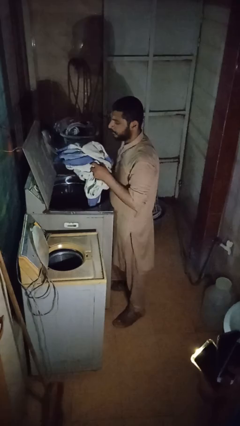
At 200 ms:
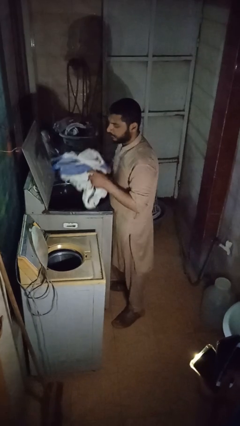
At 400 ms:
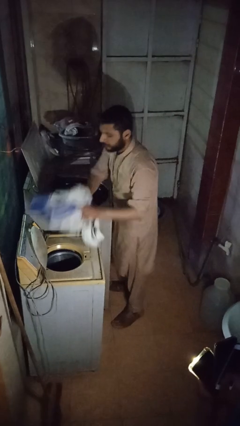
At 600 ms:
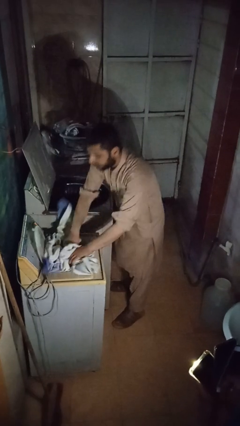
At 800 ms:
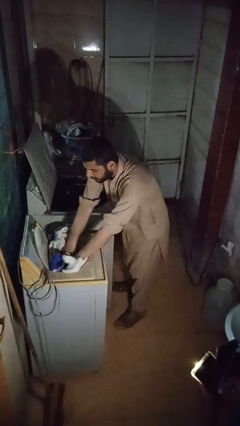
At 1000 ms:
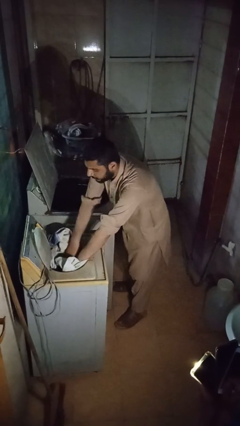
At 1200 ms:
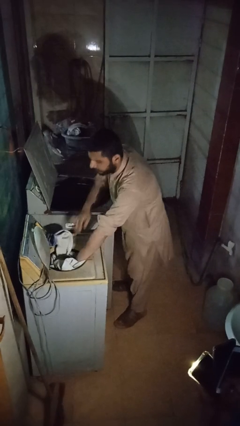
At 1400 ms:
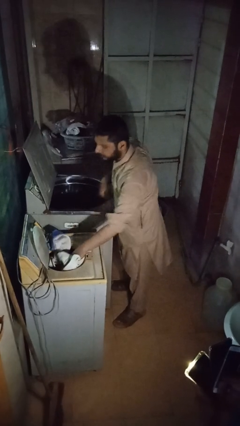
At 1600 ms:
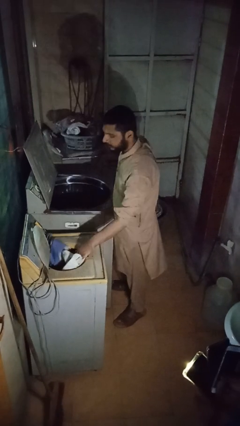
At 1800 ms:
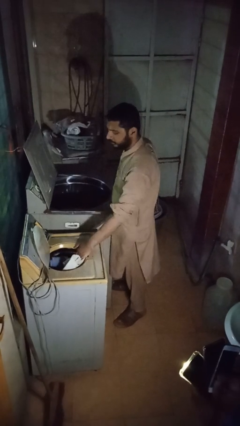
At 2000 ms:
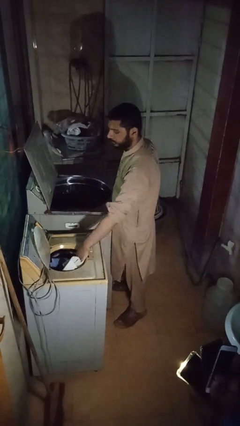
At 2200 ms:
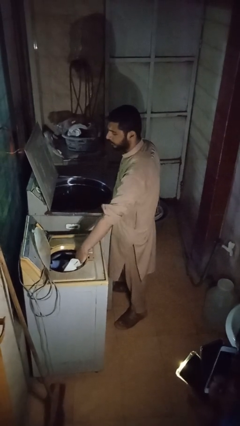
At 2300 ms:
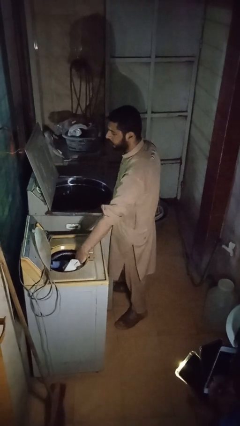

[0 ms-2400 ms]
person loads dryer

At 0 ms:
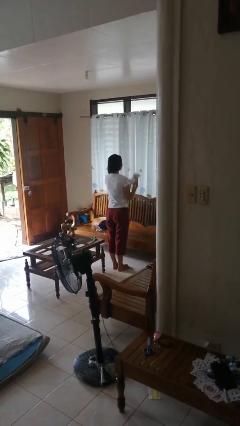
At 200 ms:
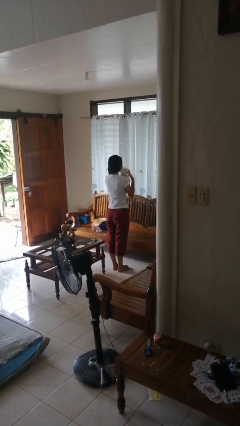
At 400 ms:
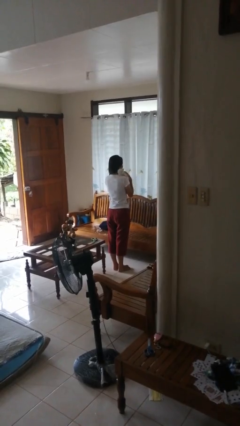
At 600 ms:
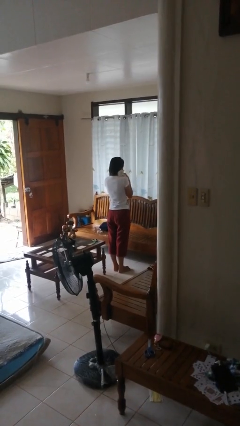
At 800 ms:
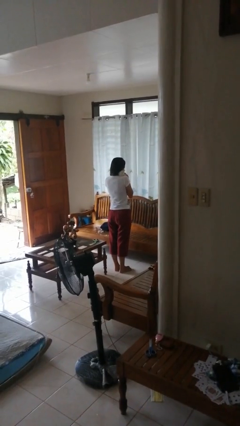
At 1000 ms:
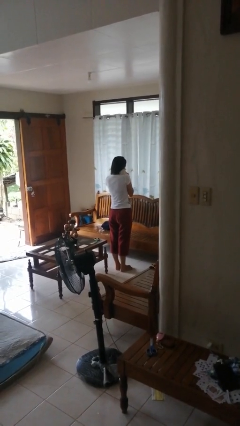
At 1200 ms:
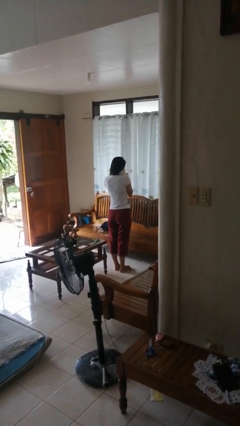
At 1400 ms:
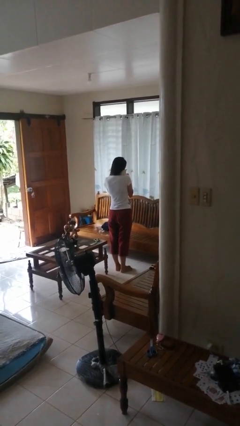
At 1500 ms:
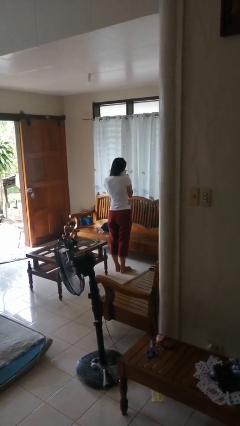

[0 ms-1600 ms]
person hugs stuffed animal

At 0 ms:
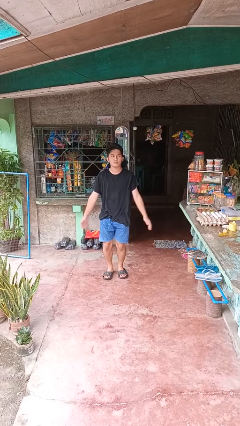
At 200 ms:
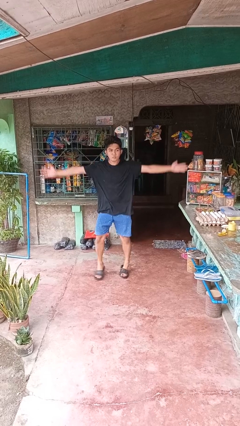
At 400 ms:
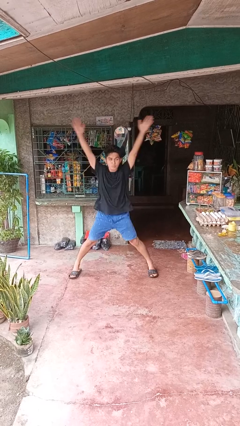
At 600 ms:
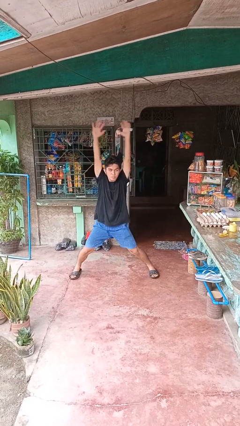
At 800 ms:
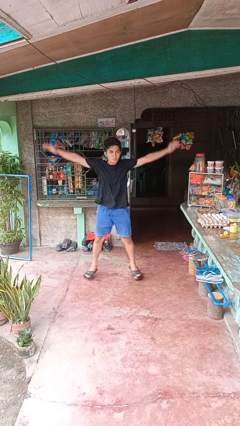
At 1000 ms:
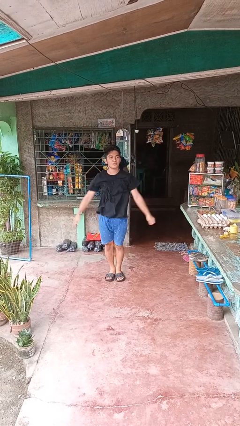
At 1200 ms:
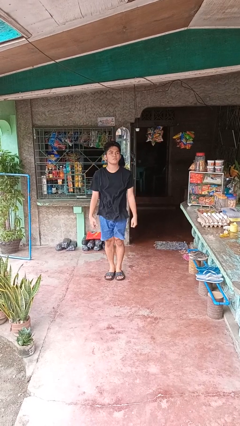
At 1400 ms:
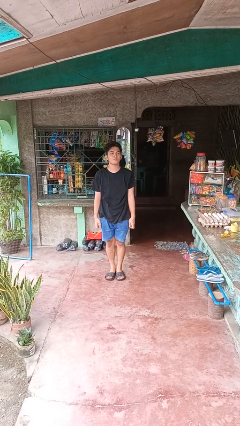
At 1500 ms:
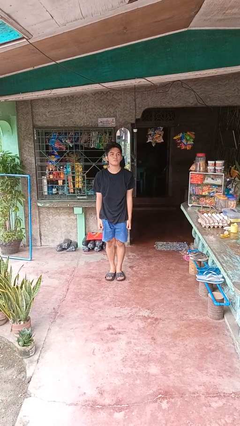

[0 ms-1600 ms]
person exercises with jumping jacks

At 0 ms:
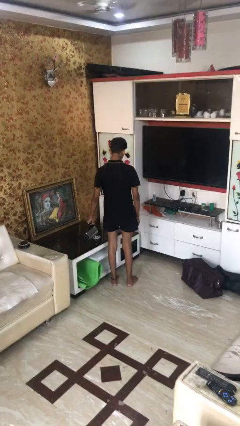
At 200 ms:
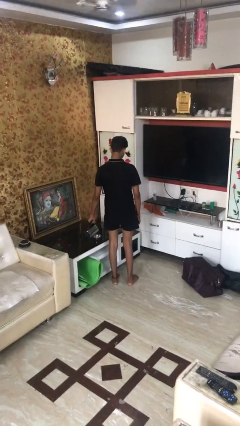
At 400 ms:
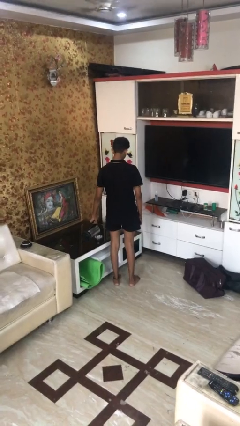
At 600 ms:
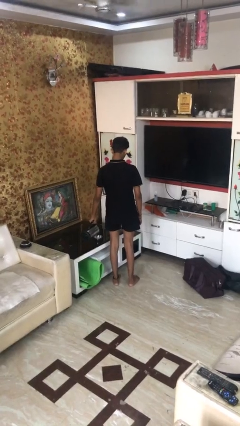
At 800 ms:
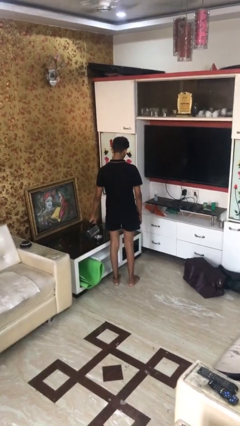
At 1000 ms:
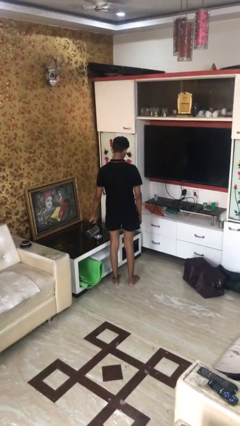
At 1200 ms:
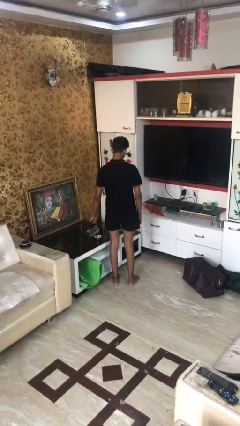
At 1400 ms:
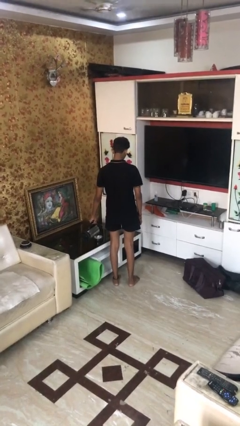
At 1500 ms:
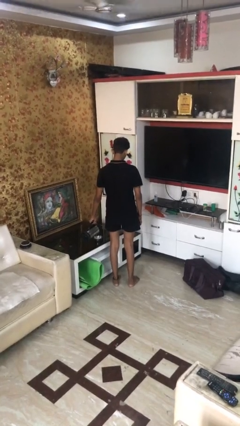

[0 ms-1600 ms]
person pours into bowl

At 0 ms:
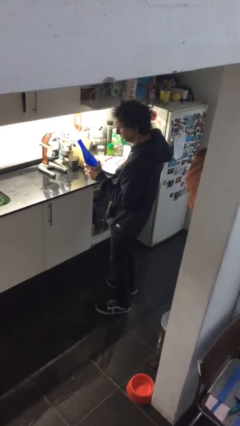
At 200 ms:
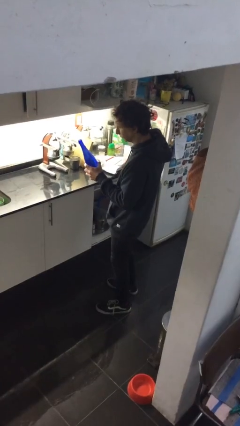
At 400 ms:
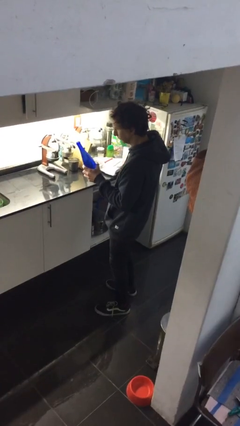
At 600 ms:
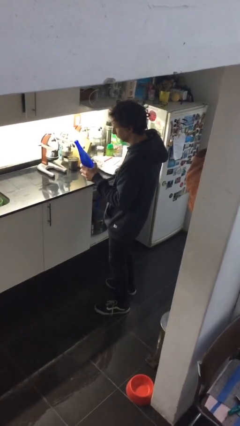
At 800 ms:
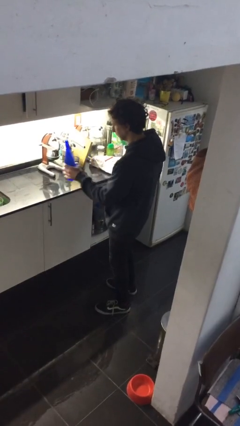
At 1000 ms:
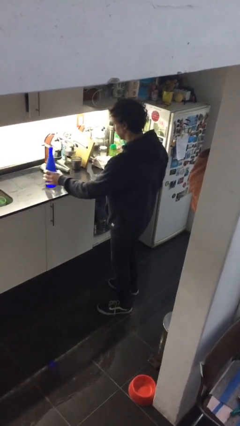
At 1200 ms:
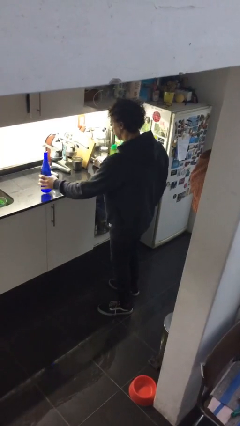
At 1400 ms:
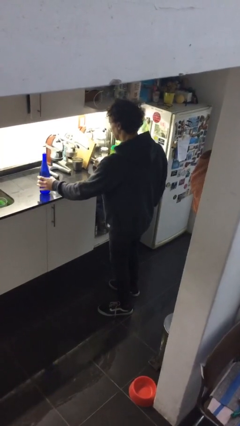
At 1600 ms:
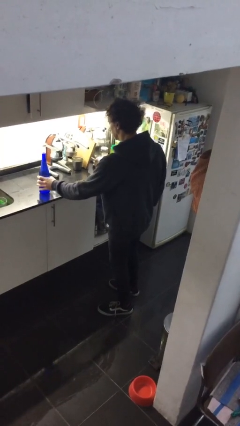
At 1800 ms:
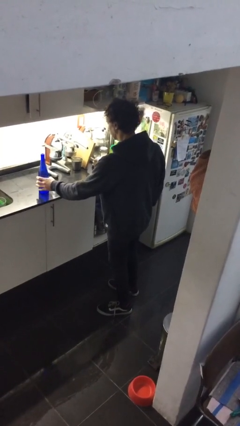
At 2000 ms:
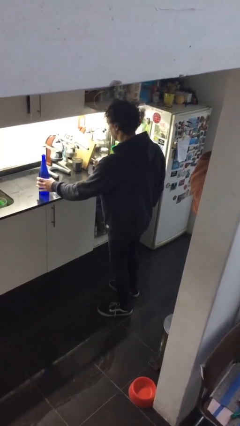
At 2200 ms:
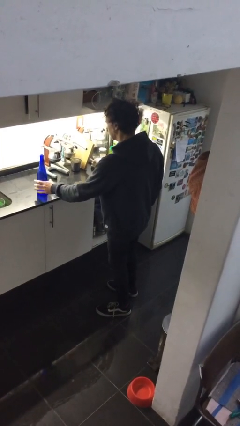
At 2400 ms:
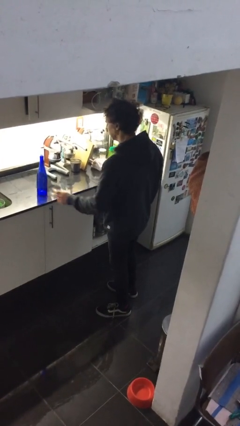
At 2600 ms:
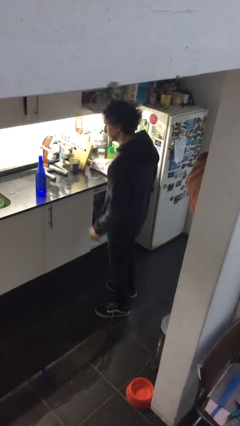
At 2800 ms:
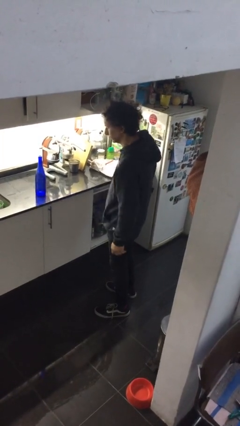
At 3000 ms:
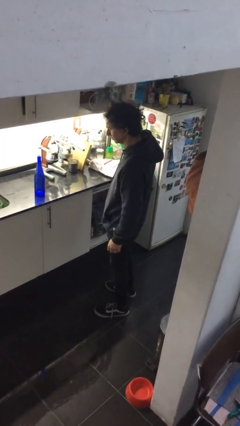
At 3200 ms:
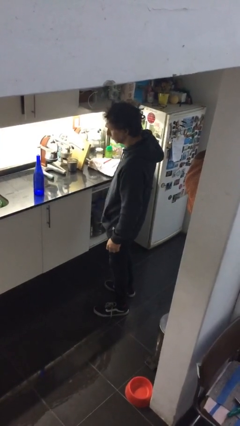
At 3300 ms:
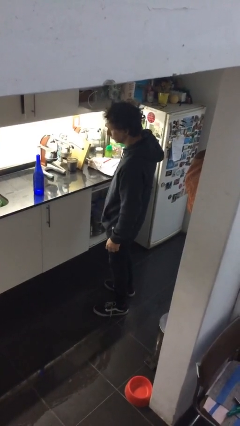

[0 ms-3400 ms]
person puts down object on countertop

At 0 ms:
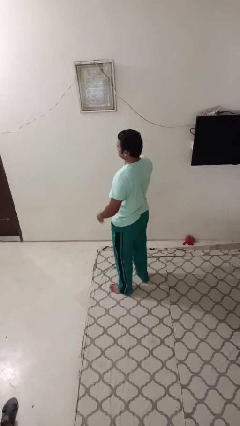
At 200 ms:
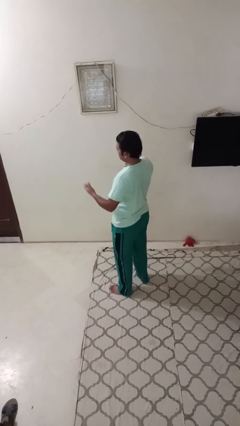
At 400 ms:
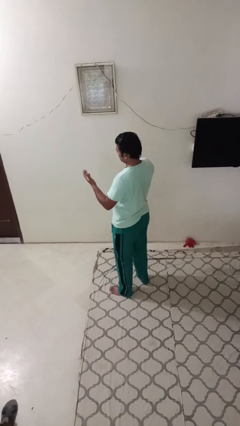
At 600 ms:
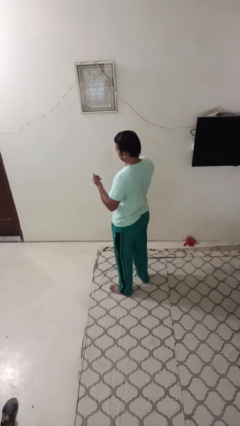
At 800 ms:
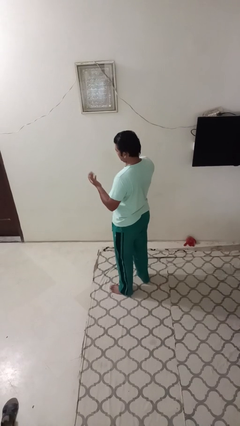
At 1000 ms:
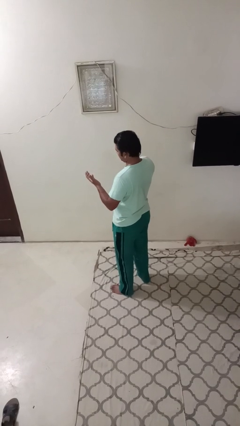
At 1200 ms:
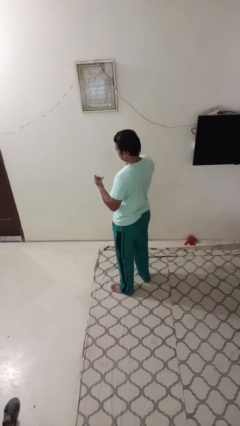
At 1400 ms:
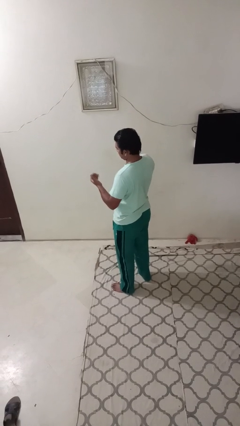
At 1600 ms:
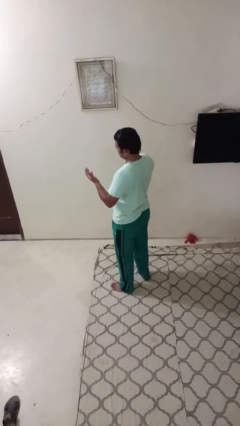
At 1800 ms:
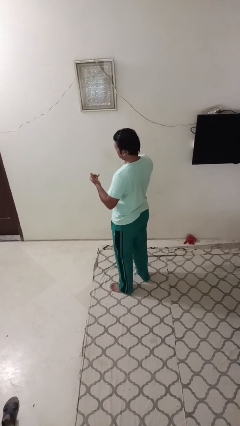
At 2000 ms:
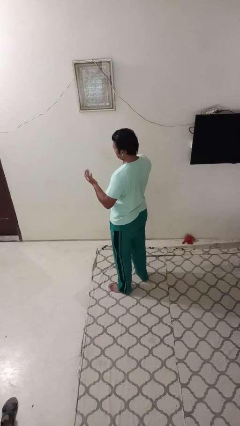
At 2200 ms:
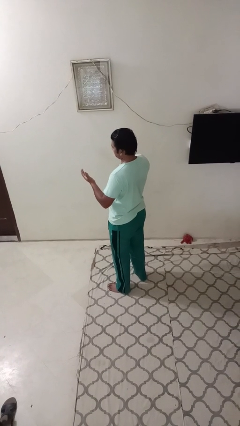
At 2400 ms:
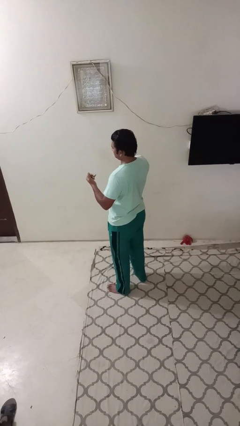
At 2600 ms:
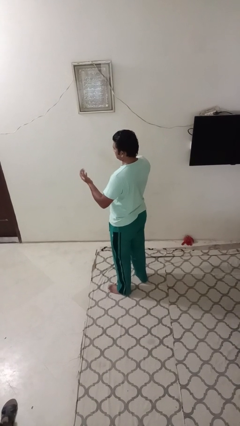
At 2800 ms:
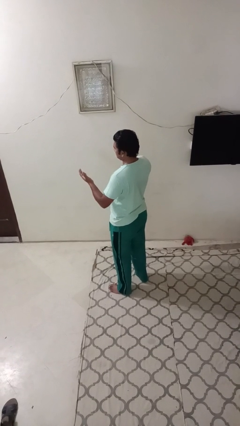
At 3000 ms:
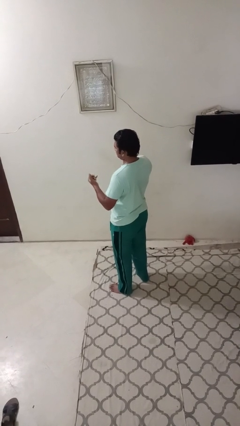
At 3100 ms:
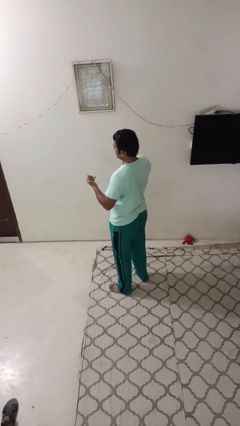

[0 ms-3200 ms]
person gestures come here

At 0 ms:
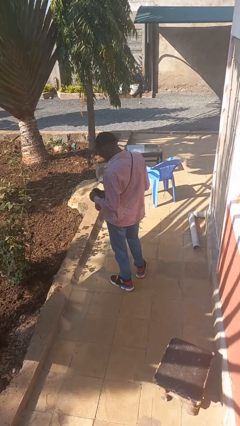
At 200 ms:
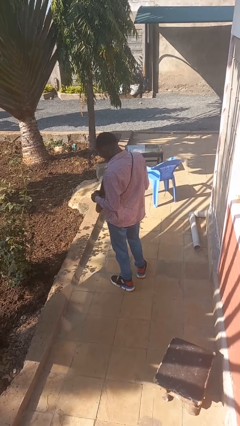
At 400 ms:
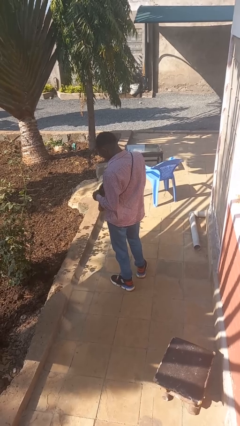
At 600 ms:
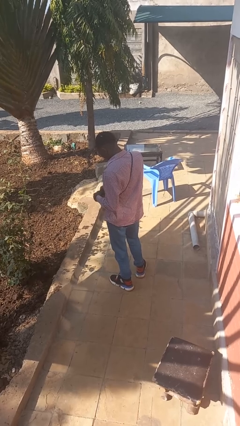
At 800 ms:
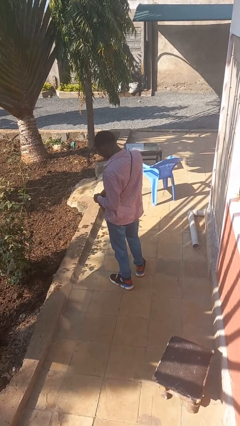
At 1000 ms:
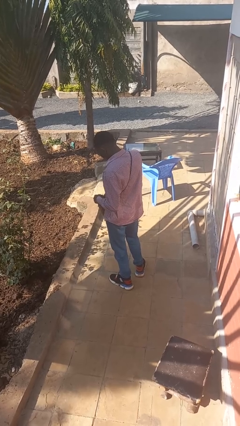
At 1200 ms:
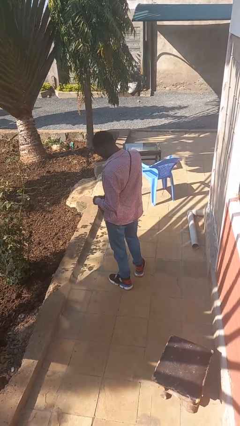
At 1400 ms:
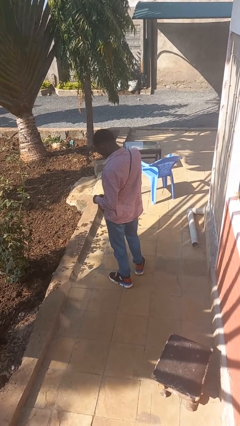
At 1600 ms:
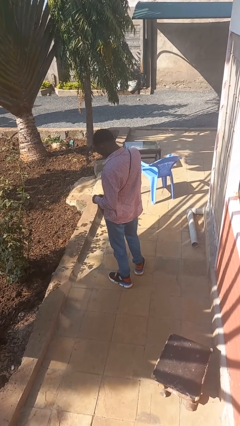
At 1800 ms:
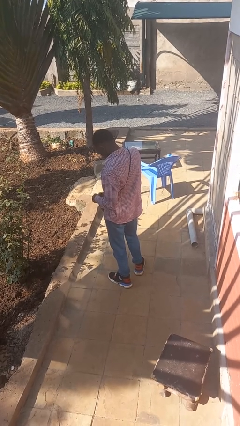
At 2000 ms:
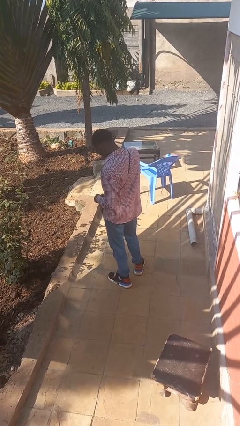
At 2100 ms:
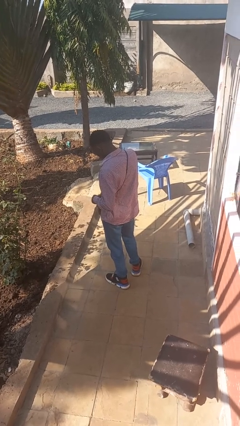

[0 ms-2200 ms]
person puts object into purse

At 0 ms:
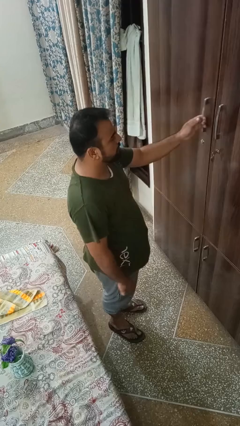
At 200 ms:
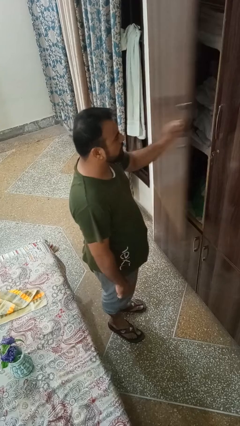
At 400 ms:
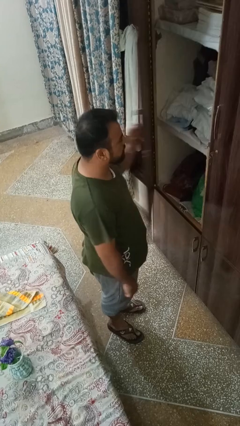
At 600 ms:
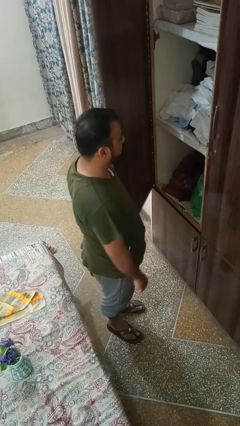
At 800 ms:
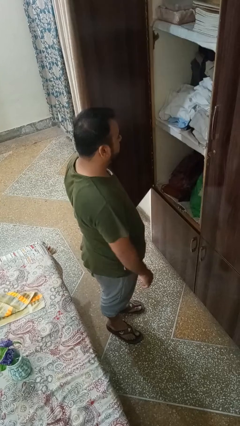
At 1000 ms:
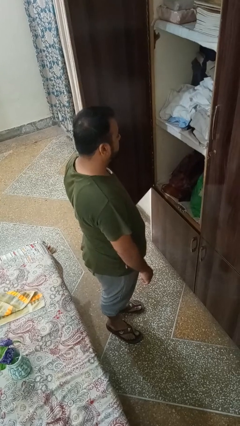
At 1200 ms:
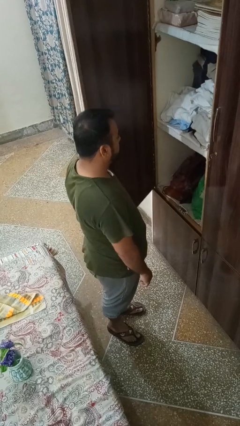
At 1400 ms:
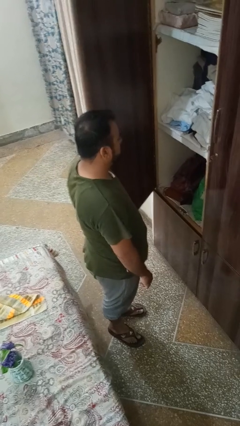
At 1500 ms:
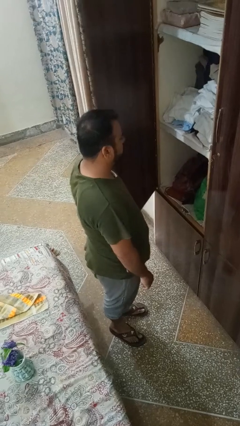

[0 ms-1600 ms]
person opens closet door
